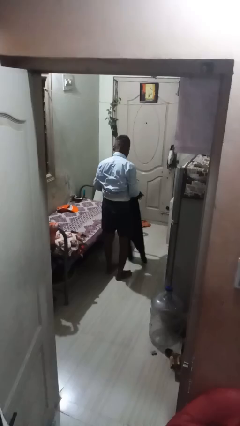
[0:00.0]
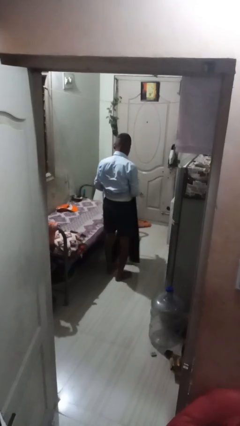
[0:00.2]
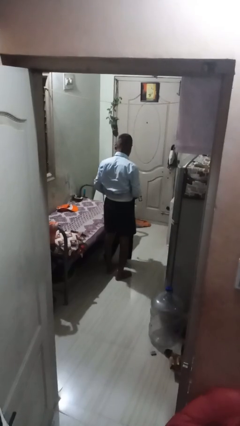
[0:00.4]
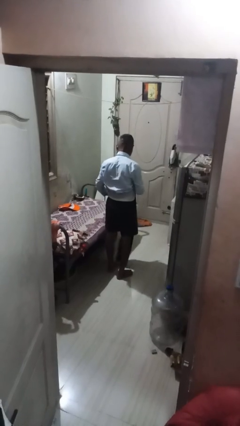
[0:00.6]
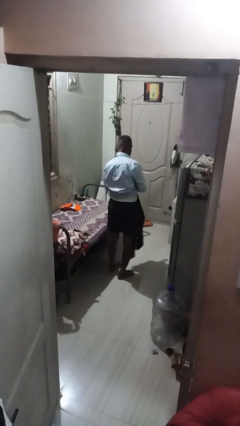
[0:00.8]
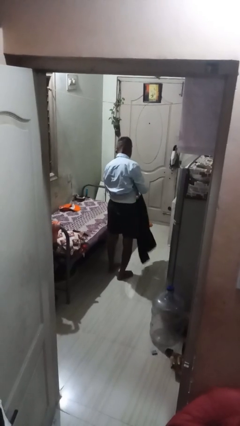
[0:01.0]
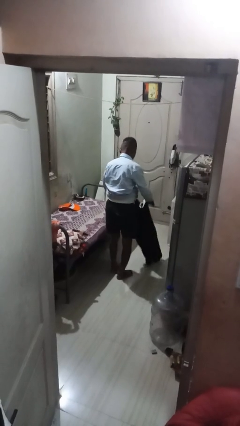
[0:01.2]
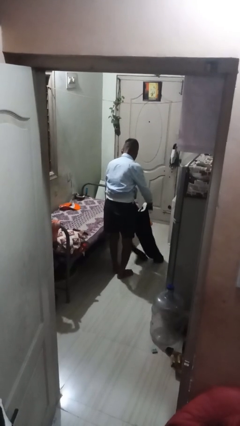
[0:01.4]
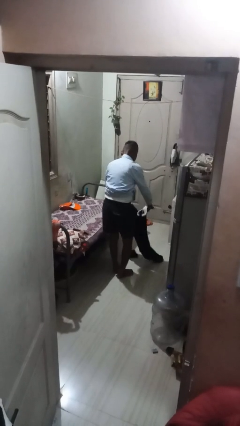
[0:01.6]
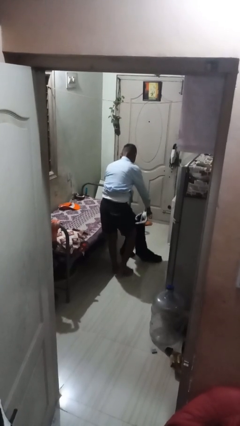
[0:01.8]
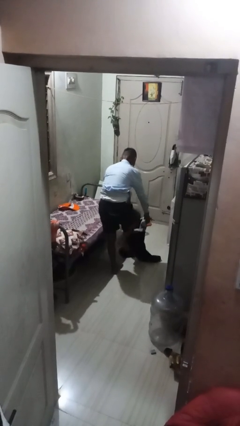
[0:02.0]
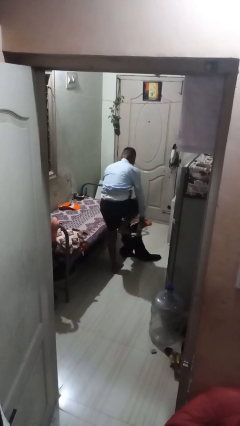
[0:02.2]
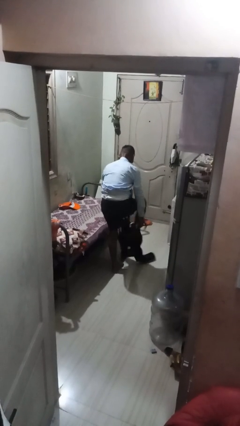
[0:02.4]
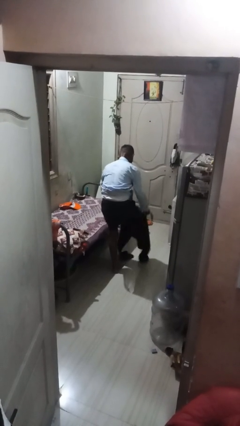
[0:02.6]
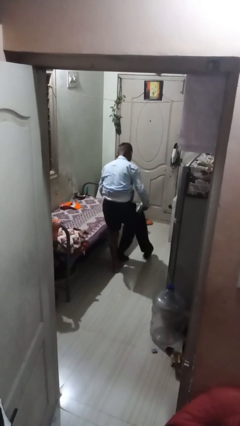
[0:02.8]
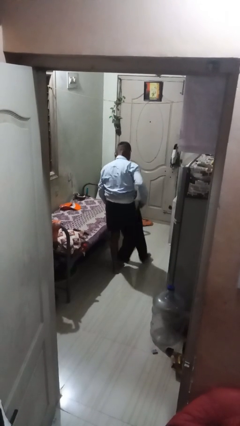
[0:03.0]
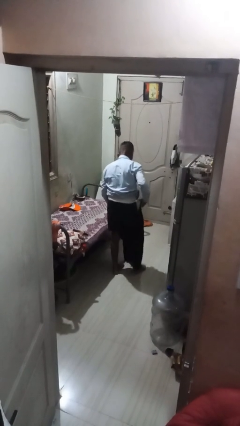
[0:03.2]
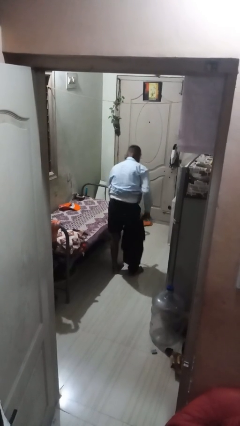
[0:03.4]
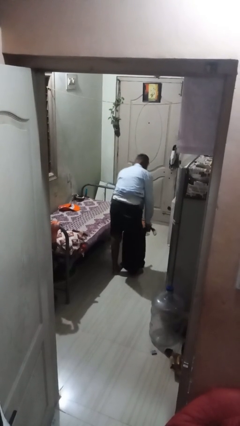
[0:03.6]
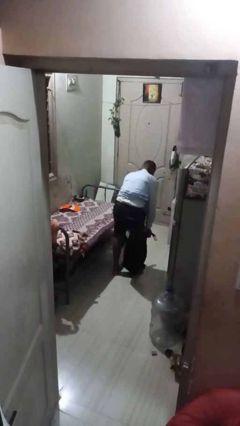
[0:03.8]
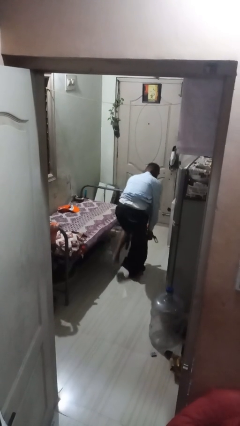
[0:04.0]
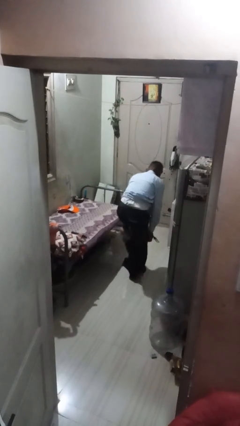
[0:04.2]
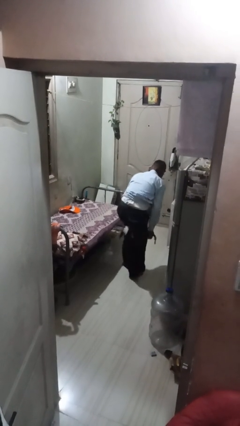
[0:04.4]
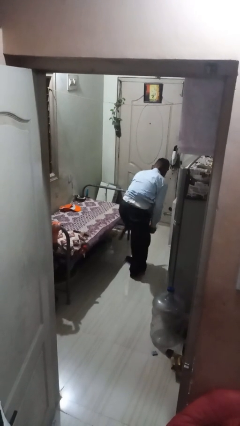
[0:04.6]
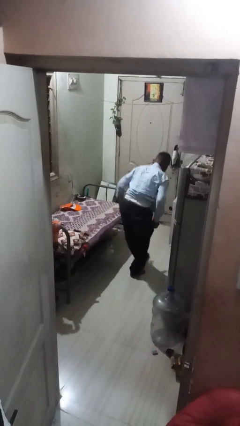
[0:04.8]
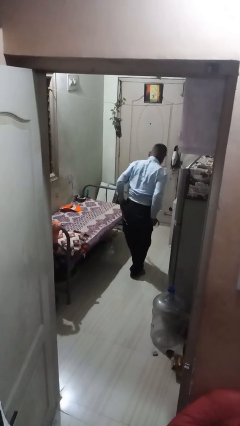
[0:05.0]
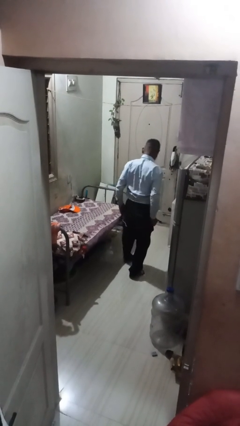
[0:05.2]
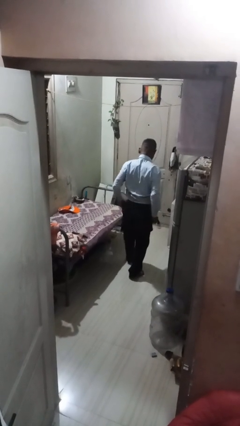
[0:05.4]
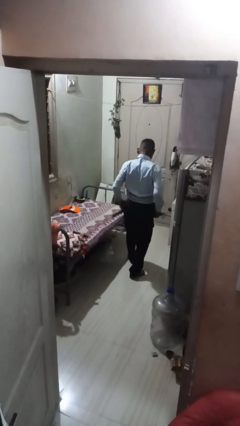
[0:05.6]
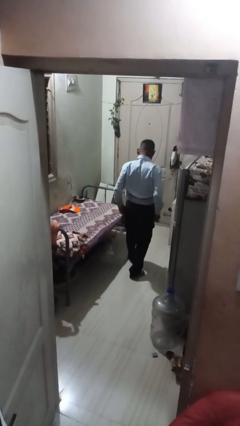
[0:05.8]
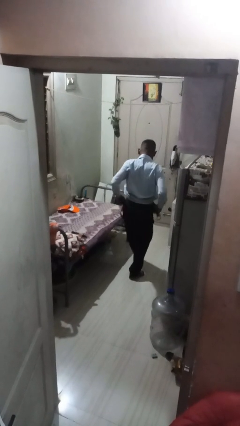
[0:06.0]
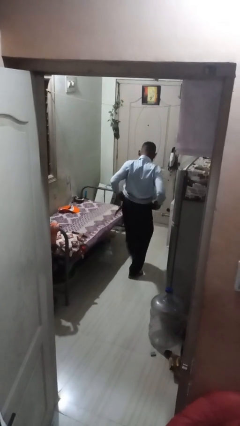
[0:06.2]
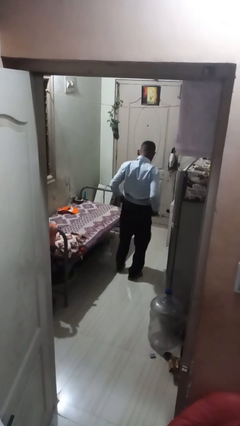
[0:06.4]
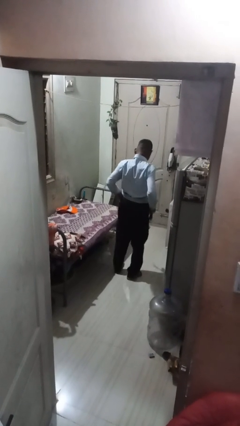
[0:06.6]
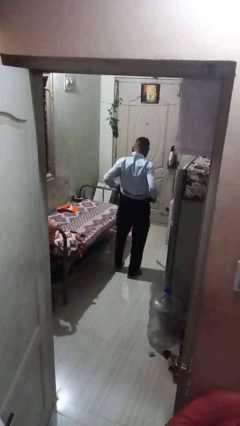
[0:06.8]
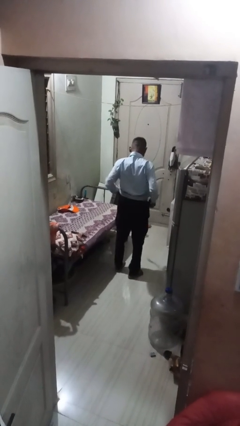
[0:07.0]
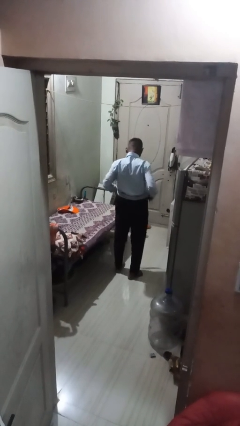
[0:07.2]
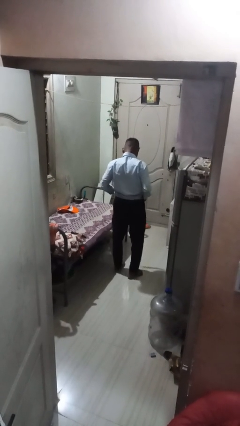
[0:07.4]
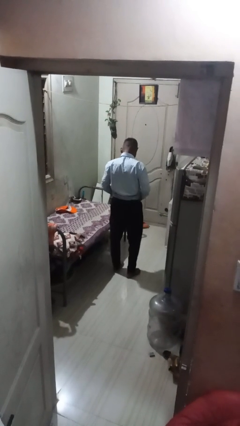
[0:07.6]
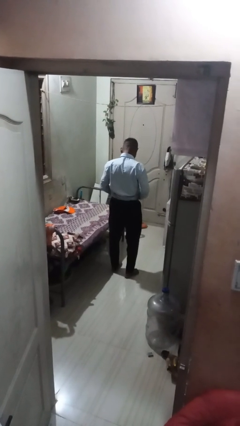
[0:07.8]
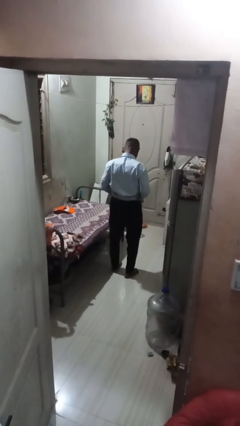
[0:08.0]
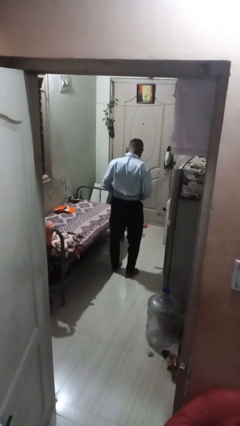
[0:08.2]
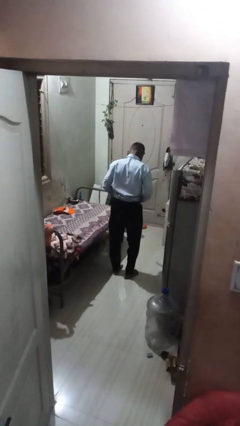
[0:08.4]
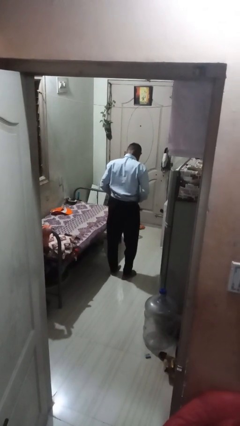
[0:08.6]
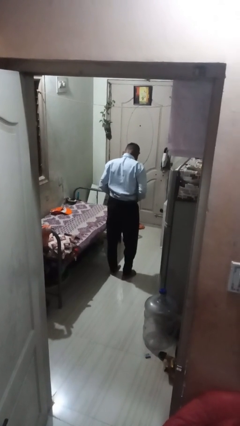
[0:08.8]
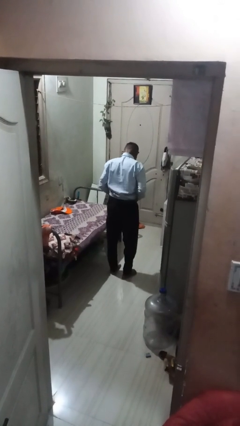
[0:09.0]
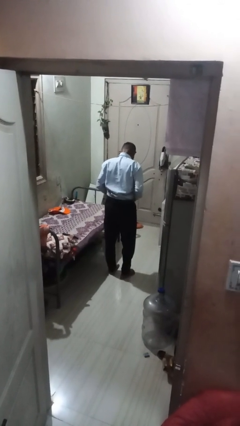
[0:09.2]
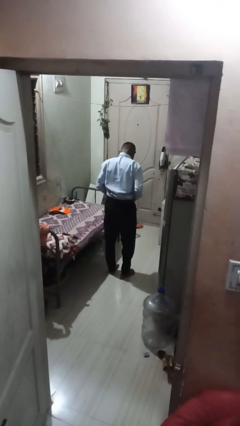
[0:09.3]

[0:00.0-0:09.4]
person puts on pants

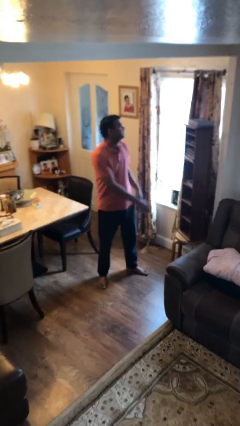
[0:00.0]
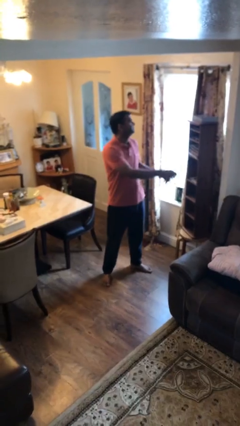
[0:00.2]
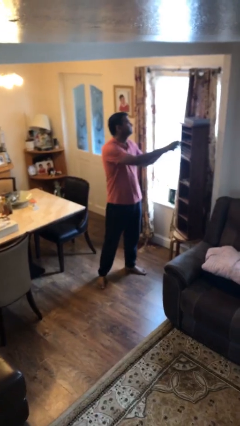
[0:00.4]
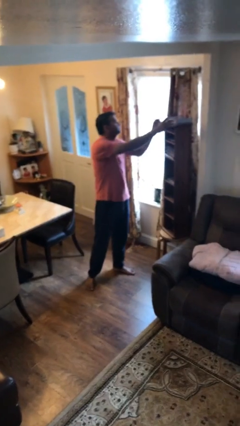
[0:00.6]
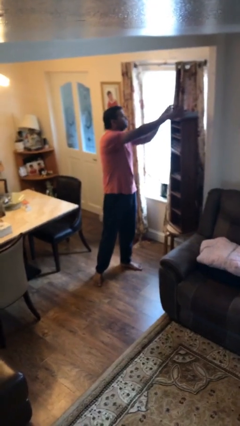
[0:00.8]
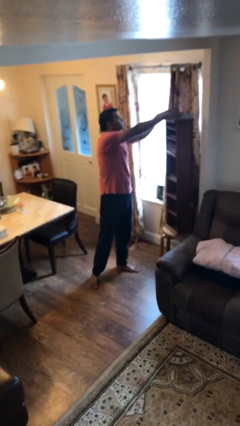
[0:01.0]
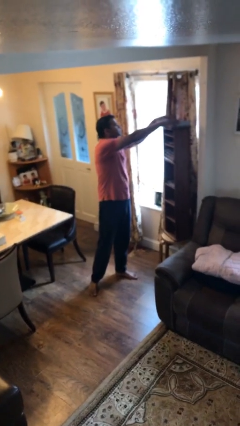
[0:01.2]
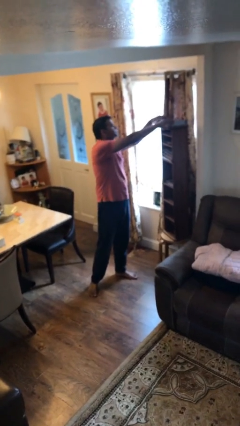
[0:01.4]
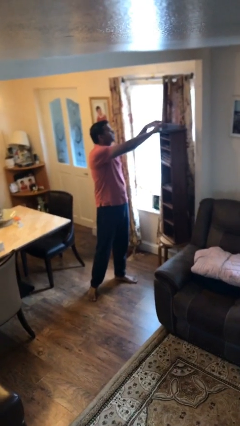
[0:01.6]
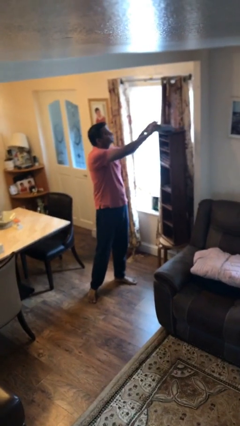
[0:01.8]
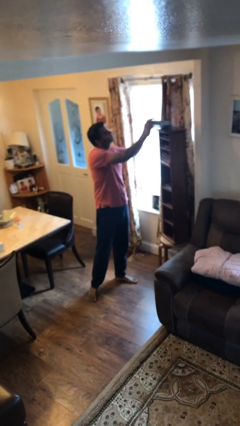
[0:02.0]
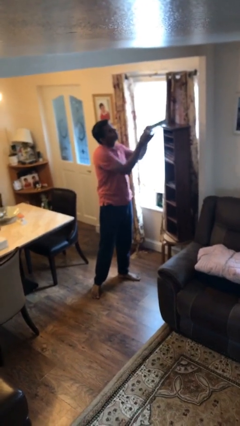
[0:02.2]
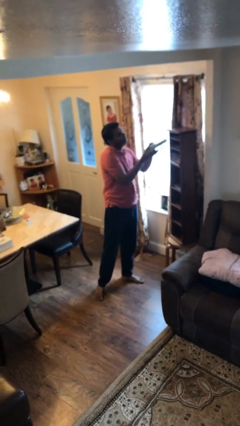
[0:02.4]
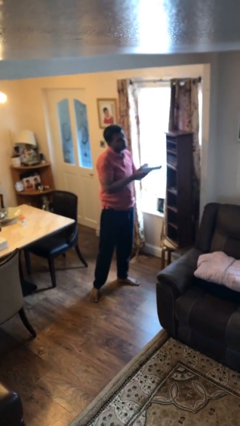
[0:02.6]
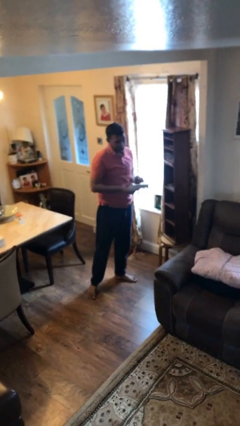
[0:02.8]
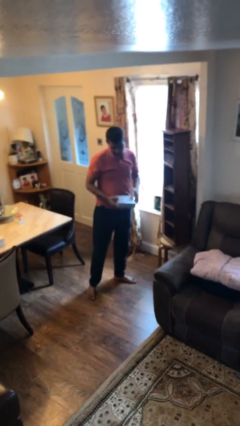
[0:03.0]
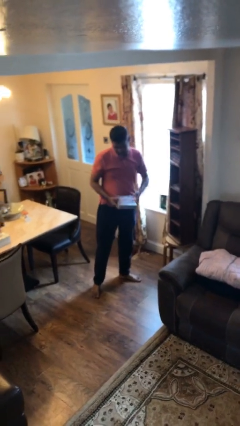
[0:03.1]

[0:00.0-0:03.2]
person picks up object from shelf

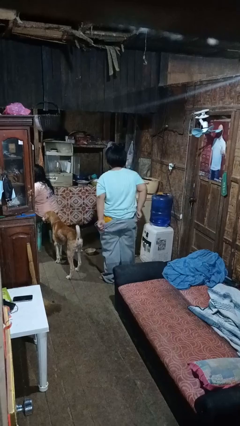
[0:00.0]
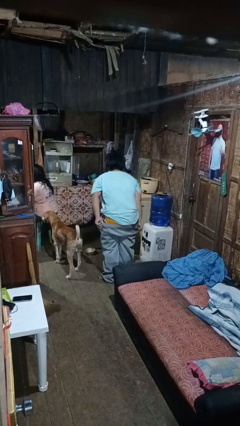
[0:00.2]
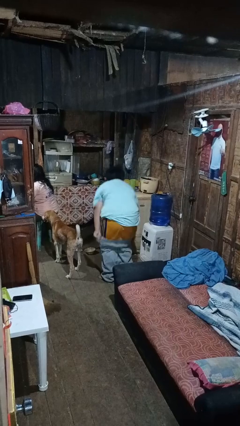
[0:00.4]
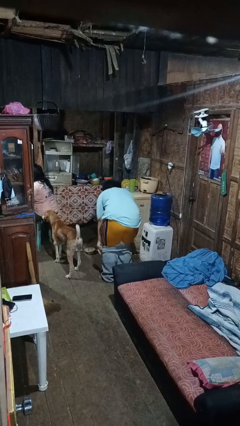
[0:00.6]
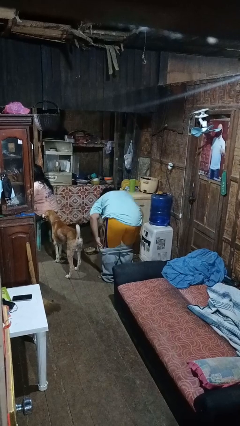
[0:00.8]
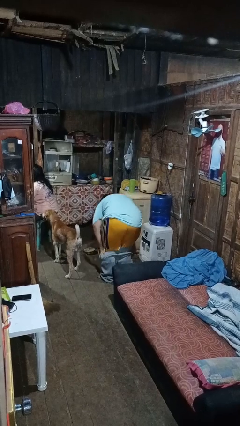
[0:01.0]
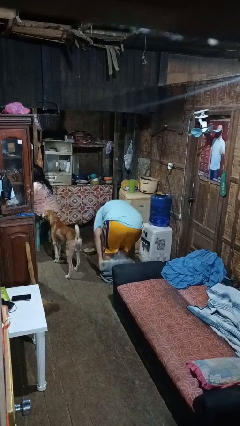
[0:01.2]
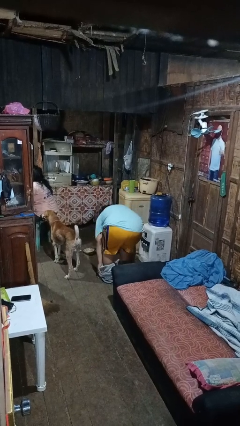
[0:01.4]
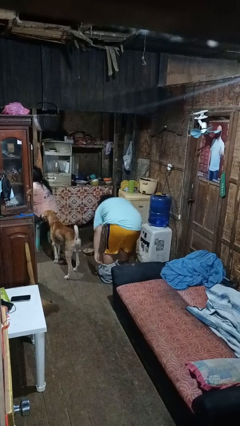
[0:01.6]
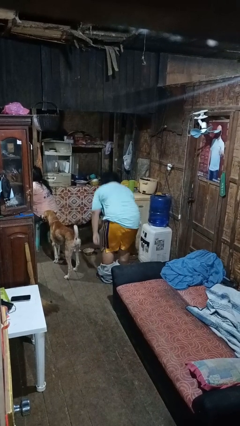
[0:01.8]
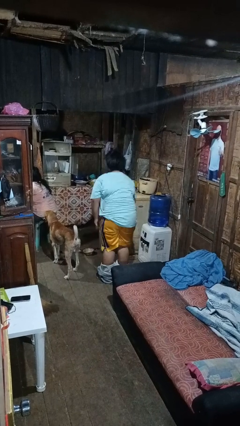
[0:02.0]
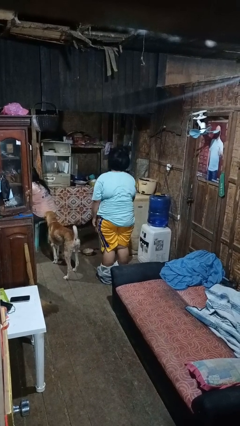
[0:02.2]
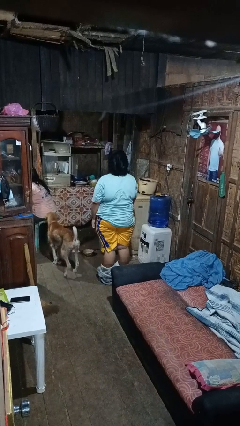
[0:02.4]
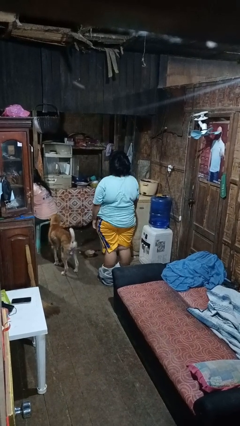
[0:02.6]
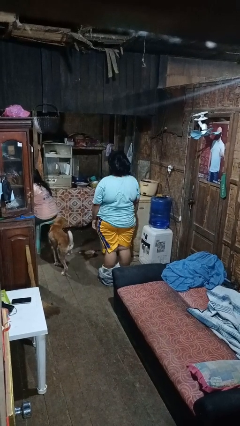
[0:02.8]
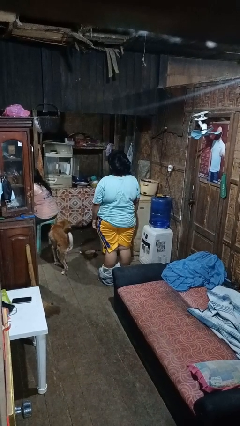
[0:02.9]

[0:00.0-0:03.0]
person takes off pants

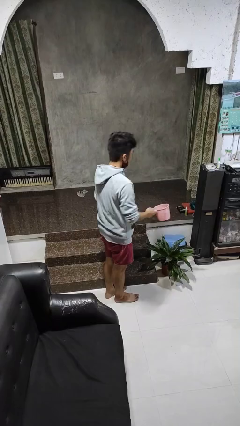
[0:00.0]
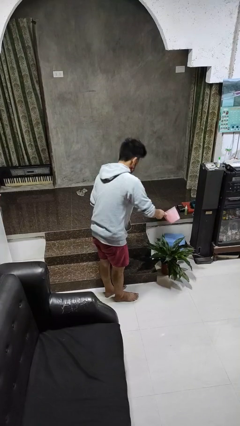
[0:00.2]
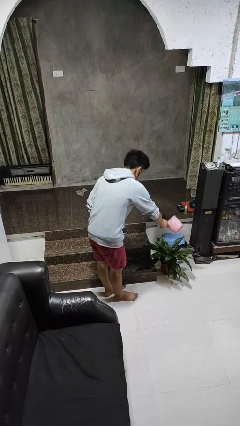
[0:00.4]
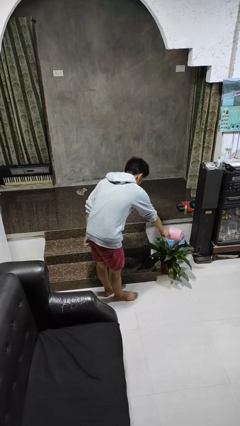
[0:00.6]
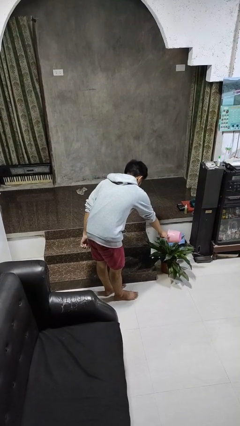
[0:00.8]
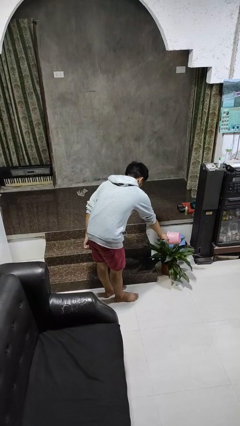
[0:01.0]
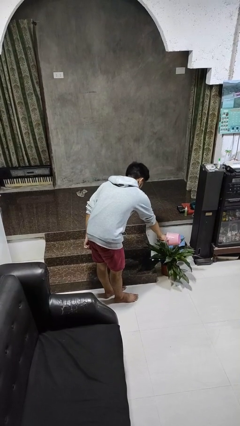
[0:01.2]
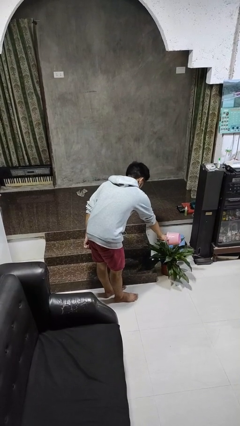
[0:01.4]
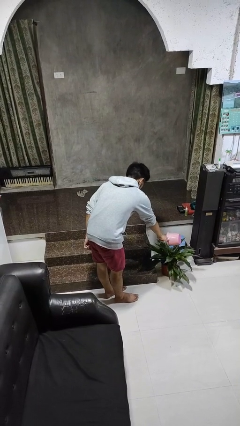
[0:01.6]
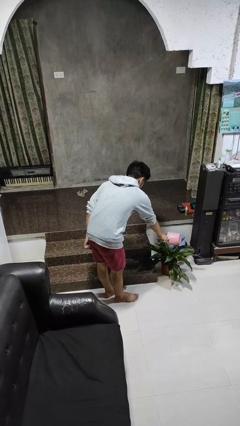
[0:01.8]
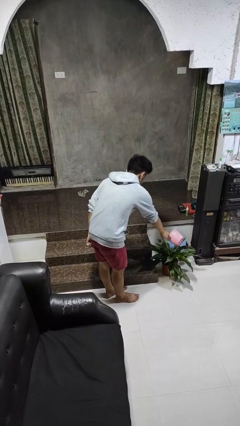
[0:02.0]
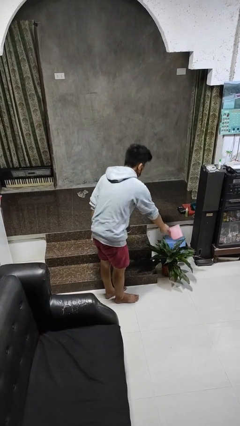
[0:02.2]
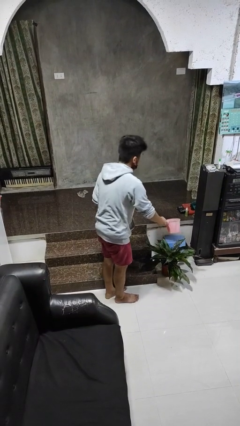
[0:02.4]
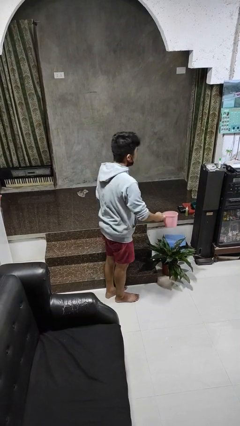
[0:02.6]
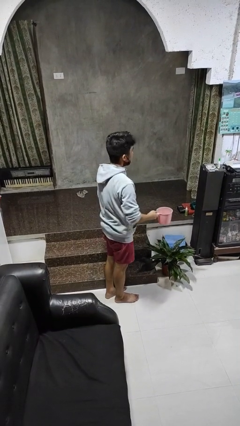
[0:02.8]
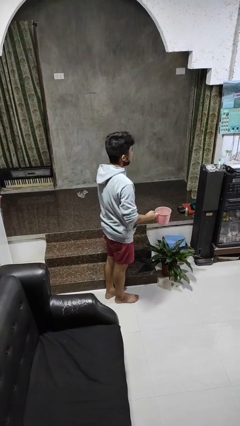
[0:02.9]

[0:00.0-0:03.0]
person waters houseplant
